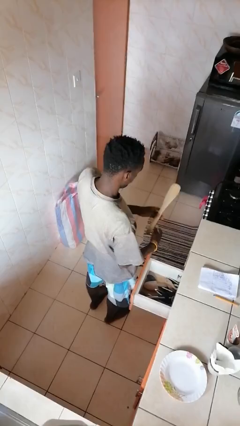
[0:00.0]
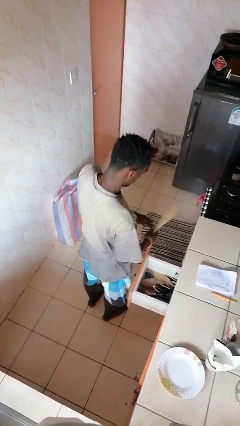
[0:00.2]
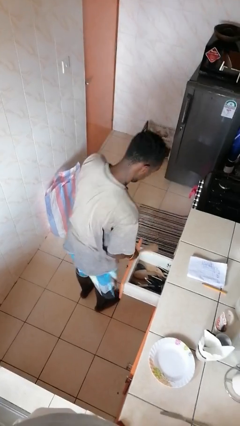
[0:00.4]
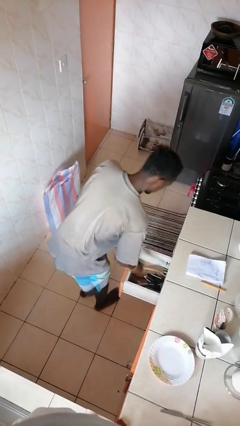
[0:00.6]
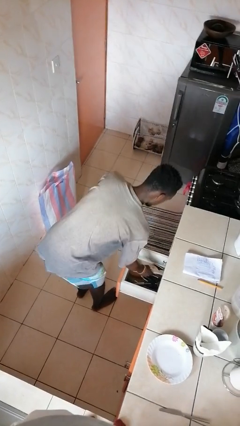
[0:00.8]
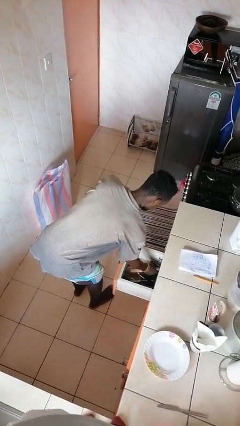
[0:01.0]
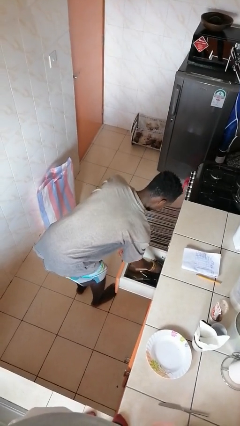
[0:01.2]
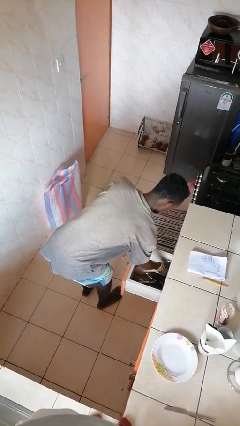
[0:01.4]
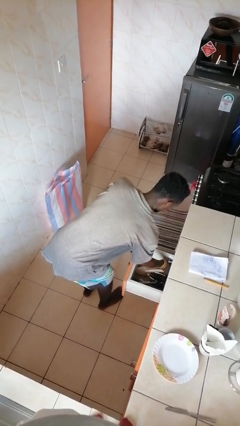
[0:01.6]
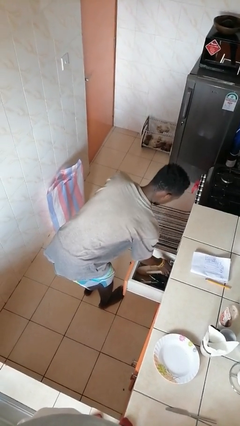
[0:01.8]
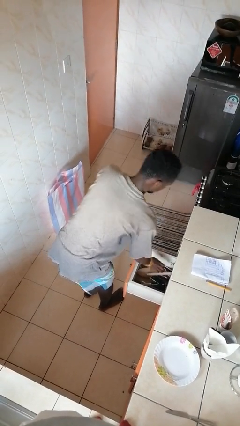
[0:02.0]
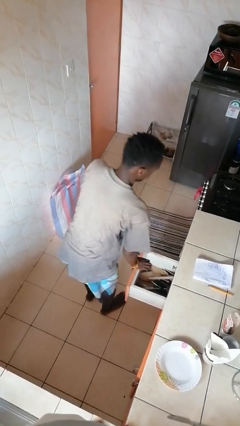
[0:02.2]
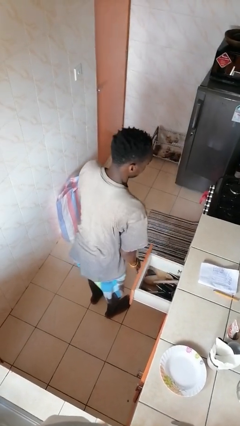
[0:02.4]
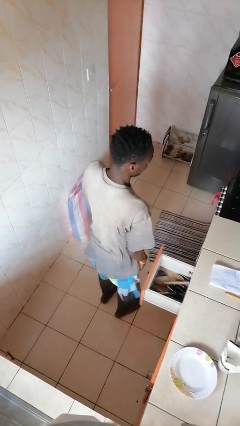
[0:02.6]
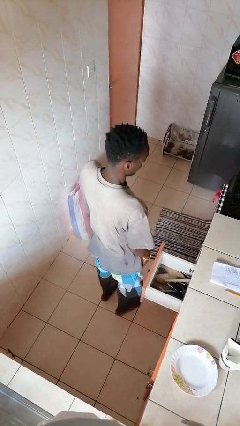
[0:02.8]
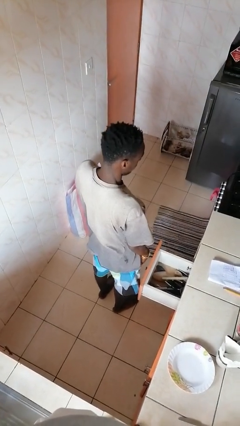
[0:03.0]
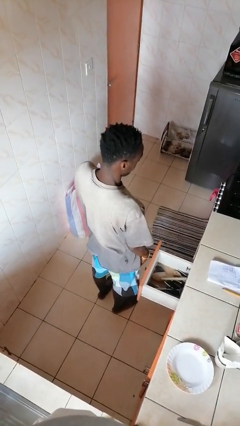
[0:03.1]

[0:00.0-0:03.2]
person puts object into kitchen drawer

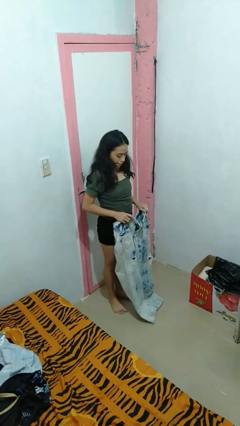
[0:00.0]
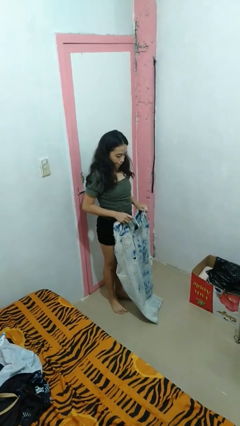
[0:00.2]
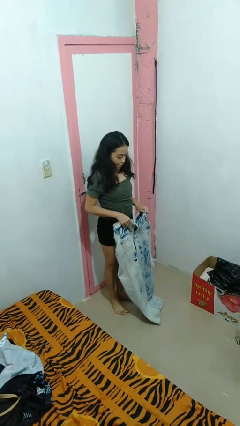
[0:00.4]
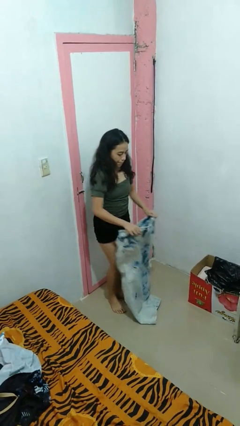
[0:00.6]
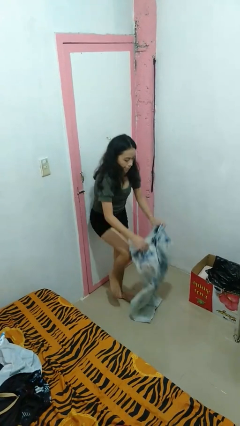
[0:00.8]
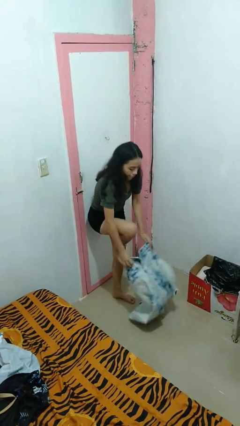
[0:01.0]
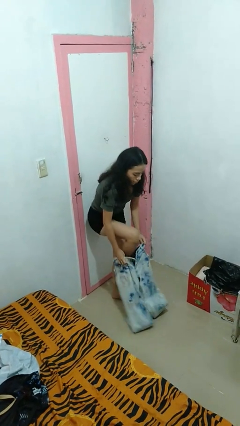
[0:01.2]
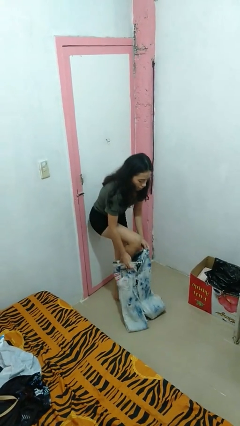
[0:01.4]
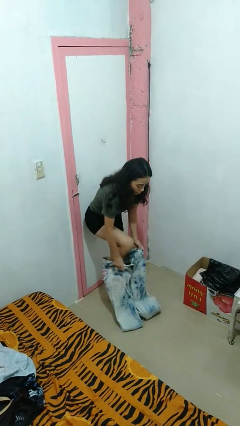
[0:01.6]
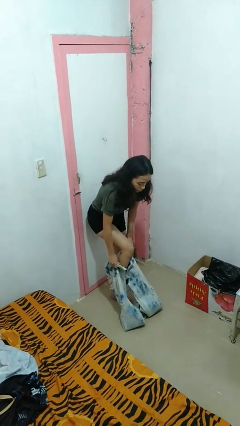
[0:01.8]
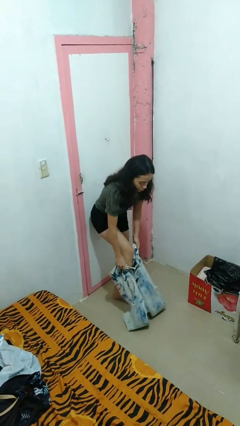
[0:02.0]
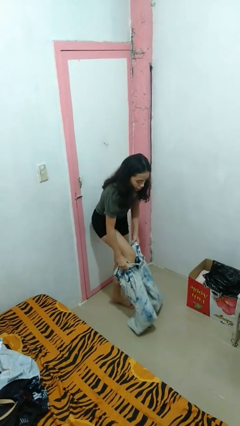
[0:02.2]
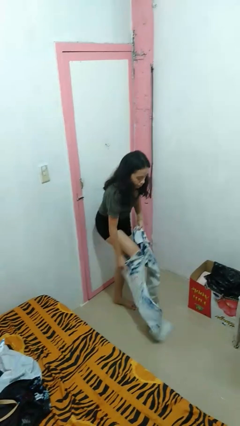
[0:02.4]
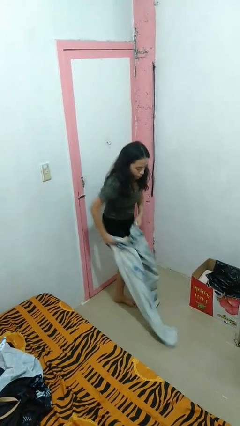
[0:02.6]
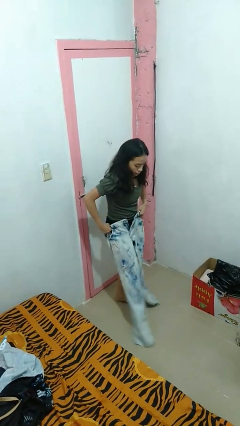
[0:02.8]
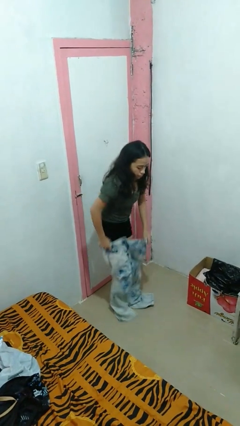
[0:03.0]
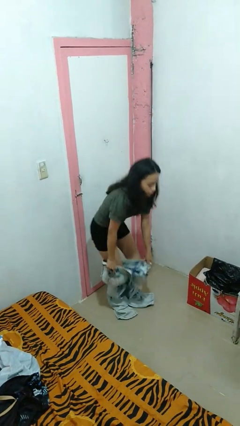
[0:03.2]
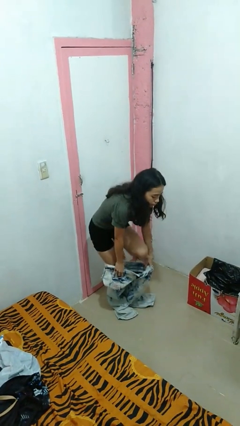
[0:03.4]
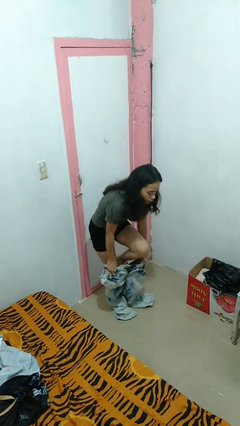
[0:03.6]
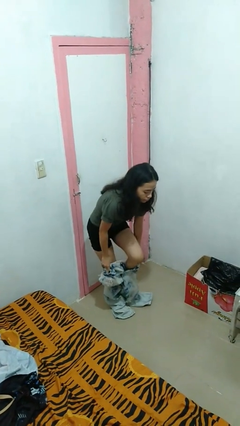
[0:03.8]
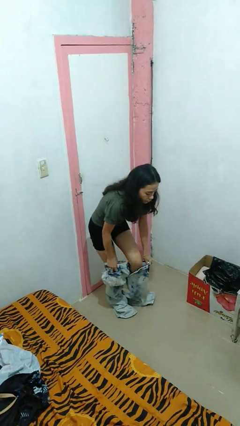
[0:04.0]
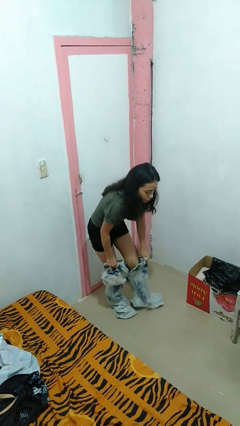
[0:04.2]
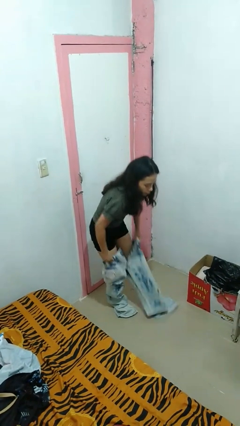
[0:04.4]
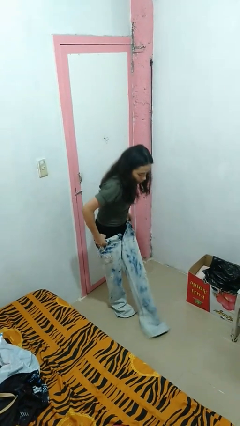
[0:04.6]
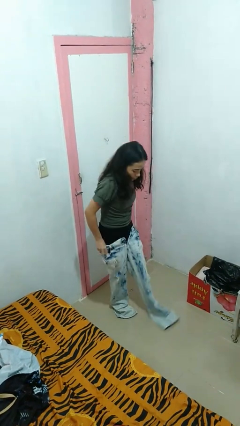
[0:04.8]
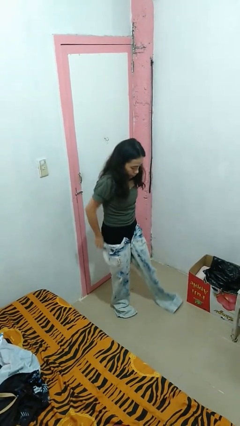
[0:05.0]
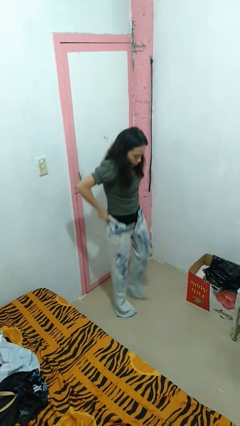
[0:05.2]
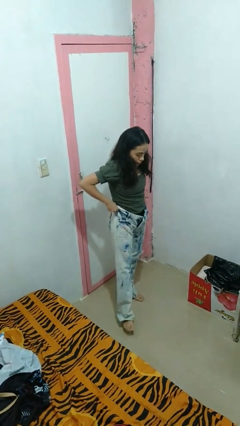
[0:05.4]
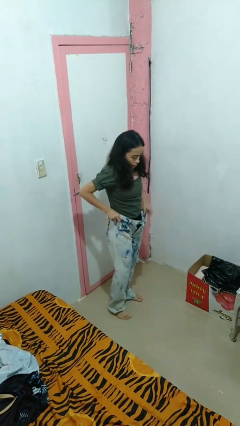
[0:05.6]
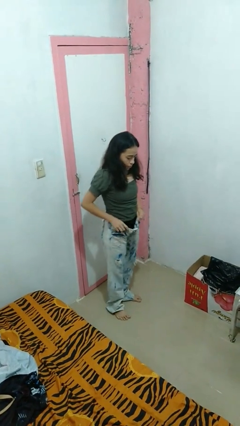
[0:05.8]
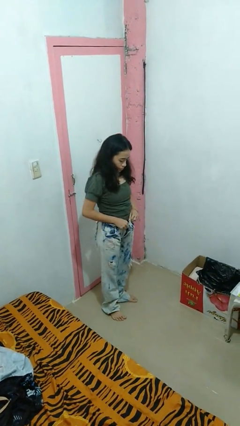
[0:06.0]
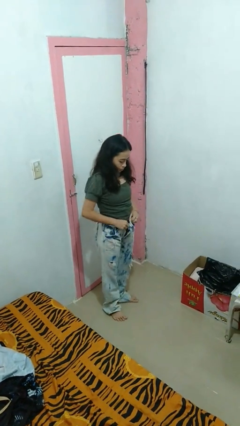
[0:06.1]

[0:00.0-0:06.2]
person puts on pants

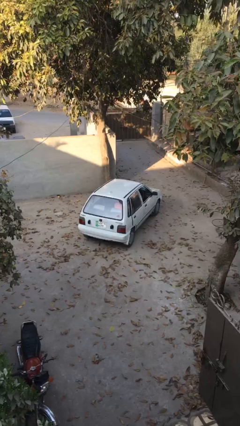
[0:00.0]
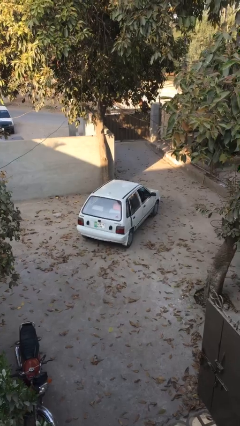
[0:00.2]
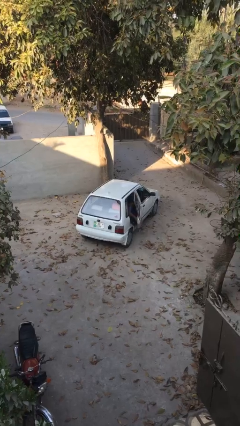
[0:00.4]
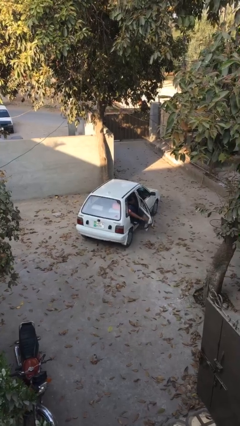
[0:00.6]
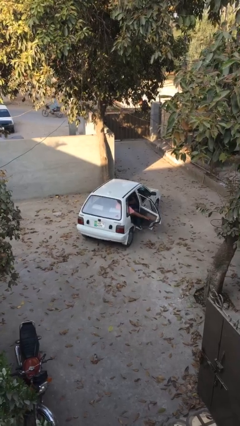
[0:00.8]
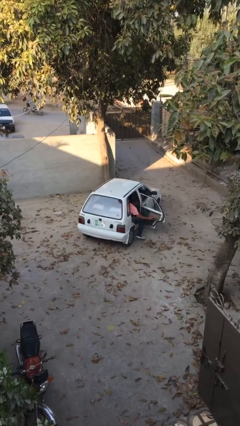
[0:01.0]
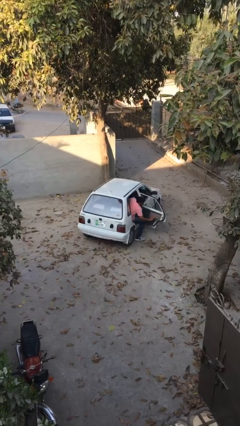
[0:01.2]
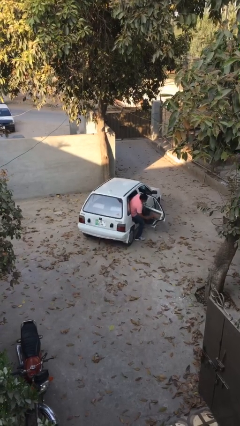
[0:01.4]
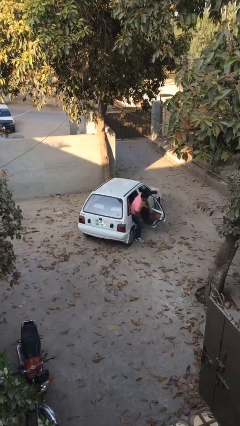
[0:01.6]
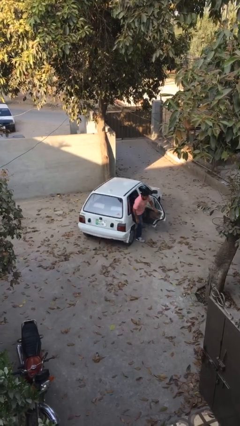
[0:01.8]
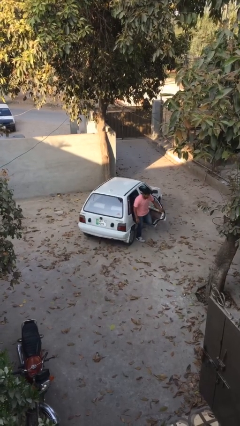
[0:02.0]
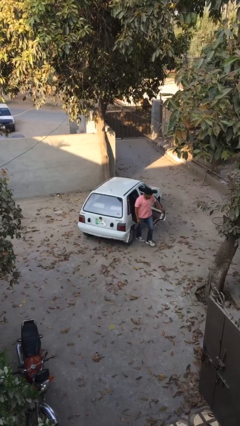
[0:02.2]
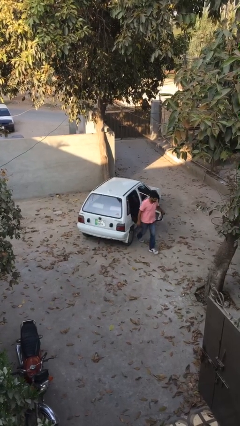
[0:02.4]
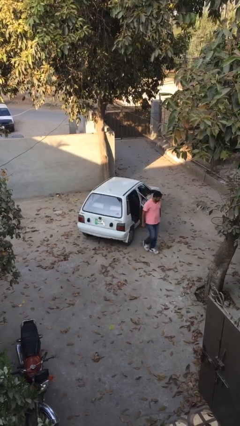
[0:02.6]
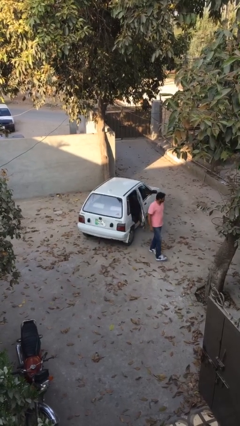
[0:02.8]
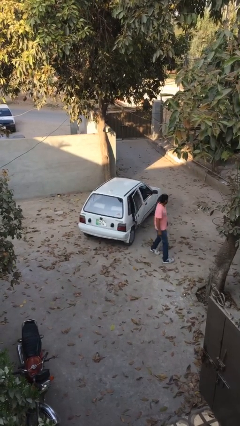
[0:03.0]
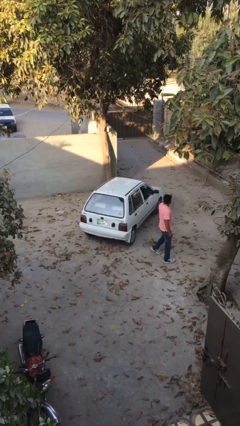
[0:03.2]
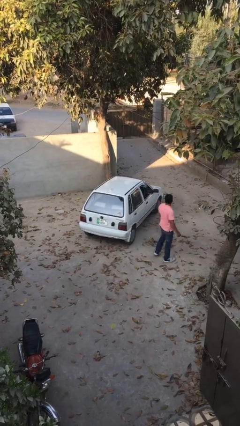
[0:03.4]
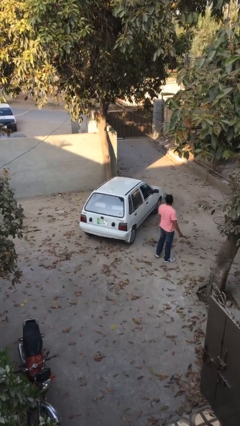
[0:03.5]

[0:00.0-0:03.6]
car drops off person

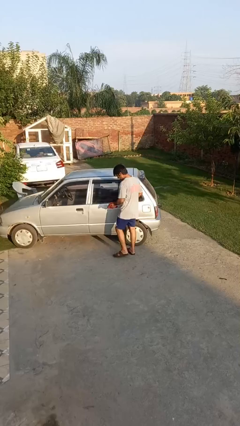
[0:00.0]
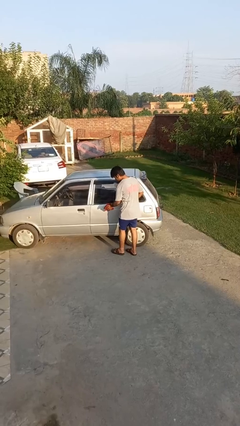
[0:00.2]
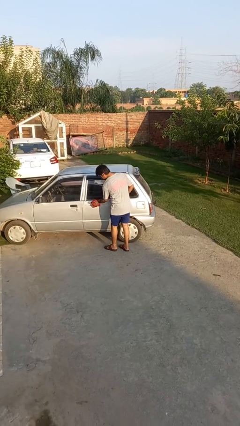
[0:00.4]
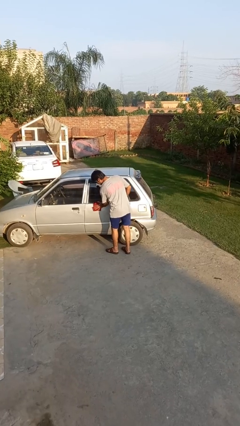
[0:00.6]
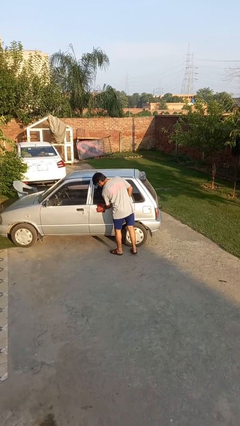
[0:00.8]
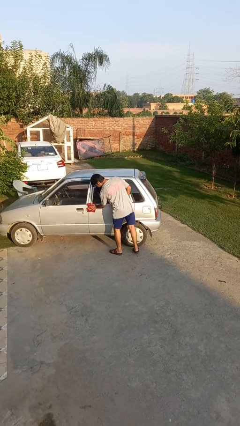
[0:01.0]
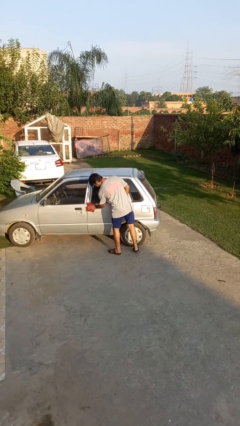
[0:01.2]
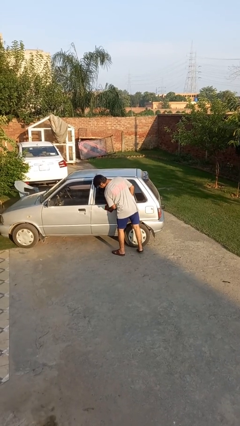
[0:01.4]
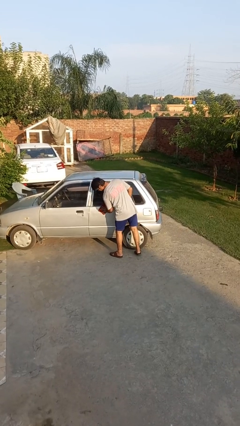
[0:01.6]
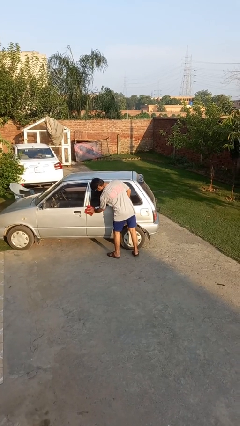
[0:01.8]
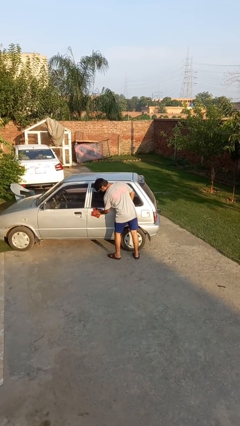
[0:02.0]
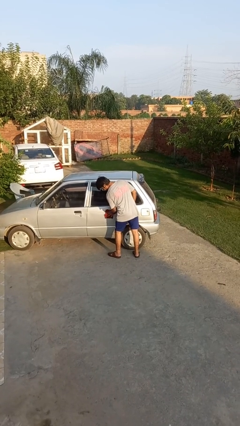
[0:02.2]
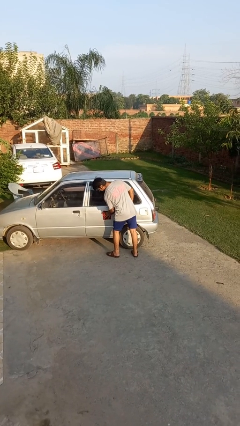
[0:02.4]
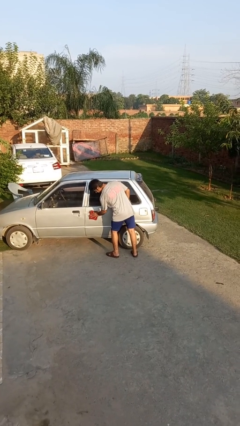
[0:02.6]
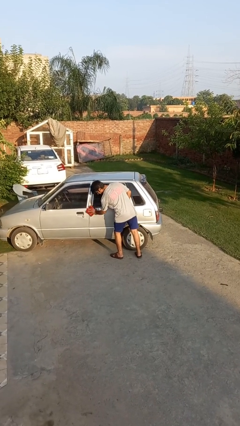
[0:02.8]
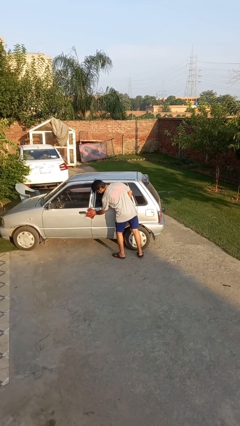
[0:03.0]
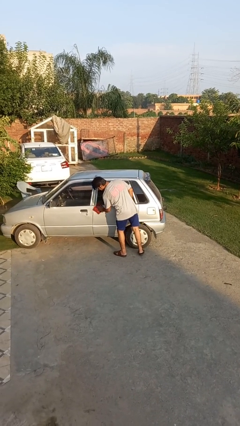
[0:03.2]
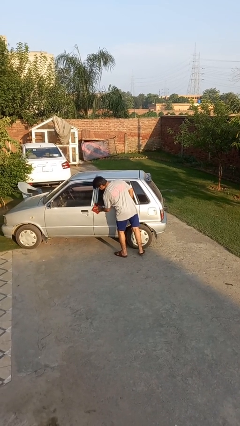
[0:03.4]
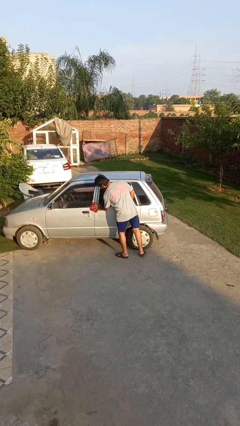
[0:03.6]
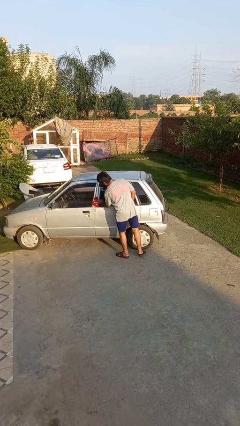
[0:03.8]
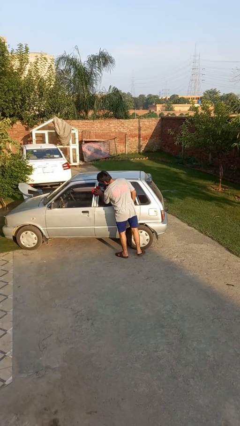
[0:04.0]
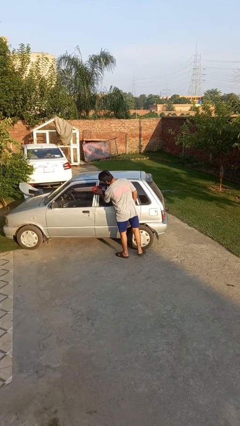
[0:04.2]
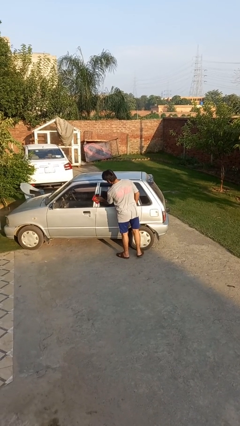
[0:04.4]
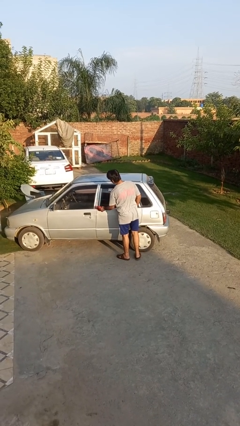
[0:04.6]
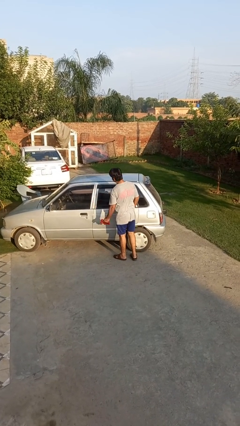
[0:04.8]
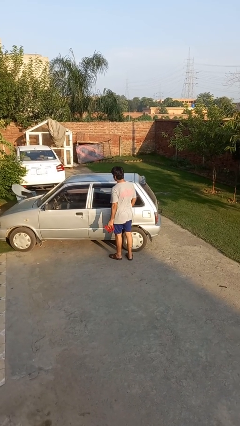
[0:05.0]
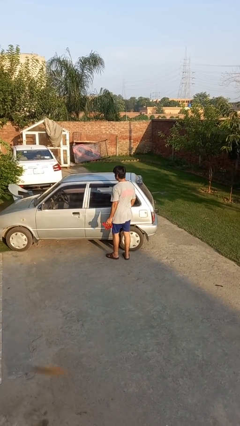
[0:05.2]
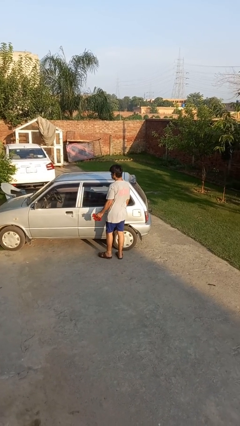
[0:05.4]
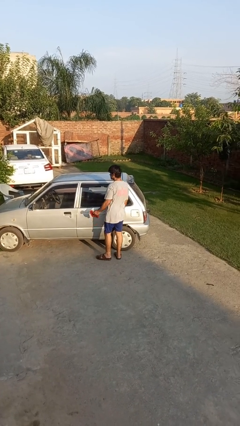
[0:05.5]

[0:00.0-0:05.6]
person polishes car with rag
